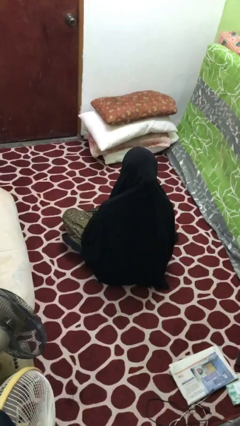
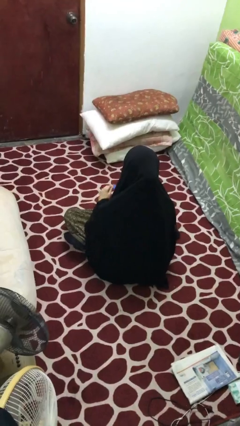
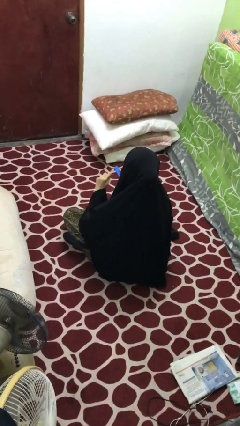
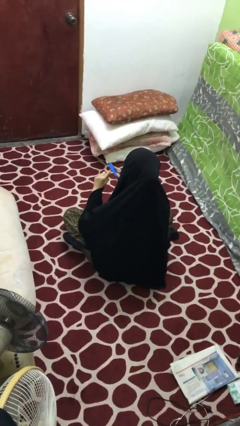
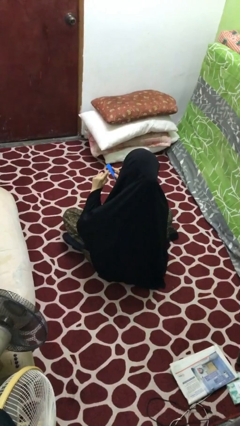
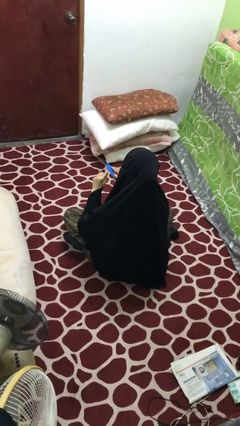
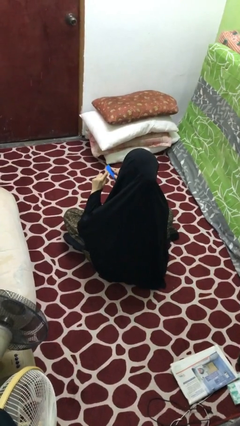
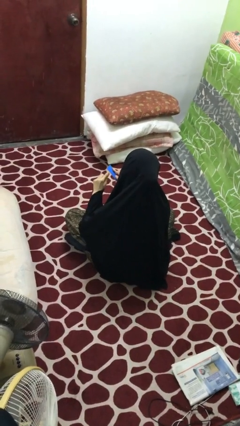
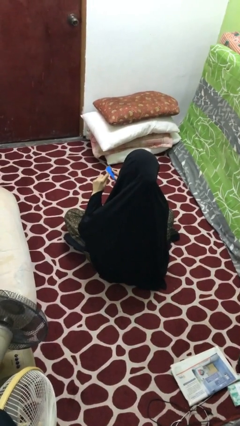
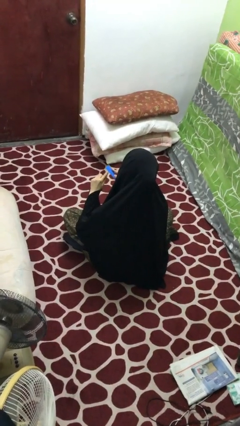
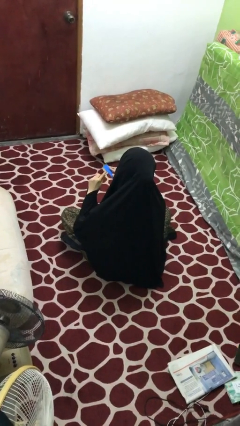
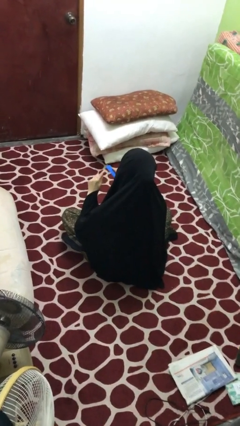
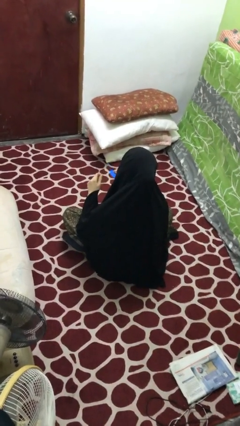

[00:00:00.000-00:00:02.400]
person files fingernails

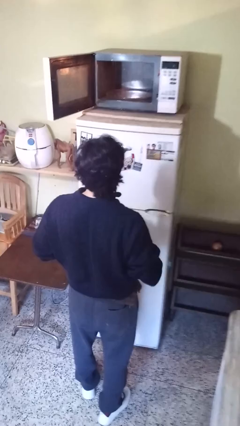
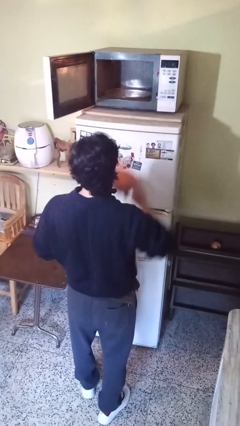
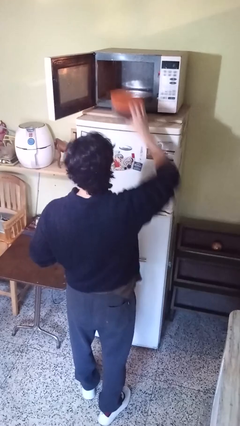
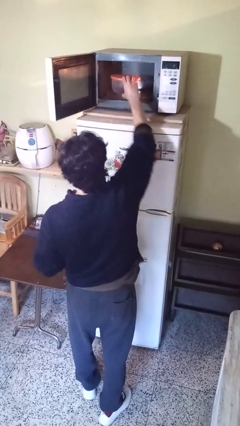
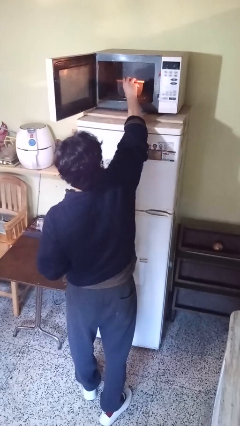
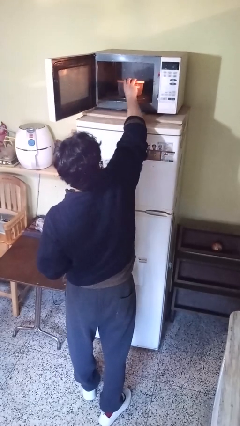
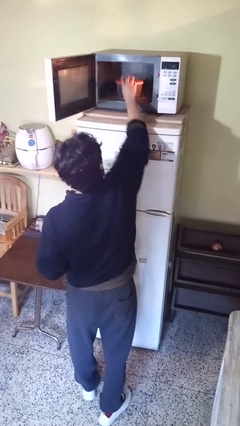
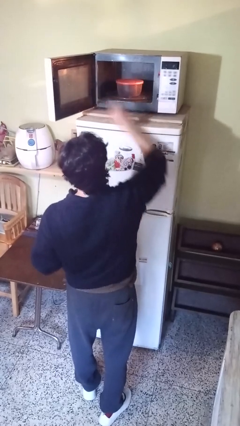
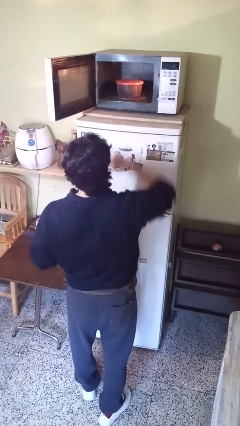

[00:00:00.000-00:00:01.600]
person puts object into microwave

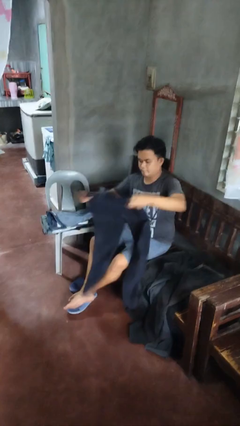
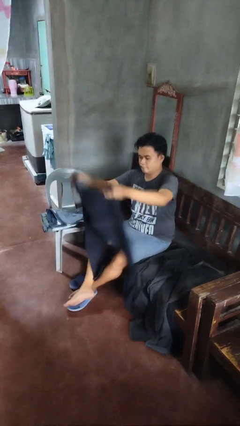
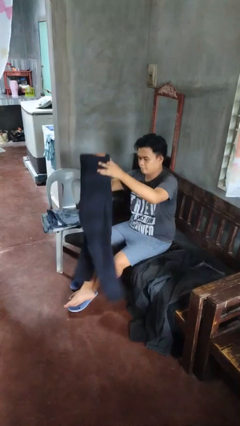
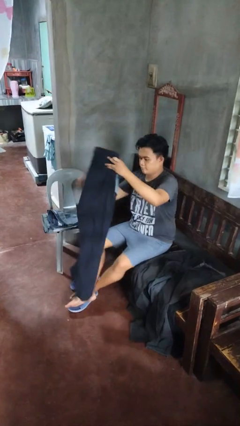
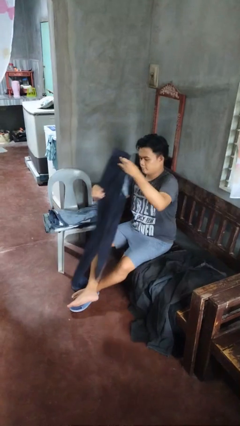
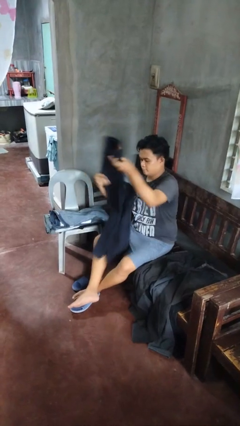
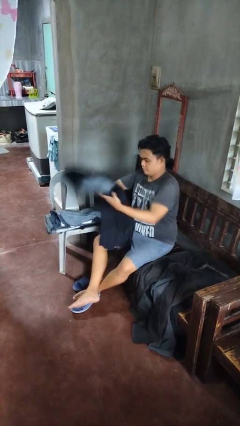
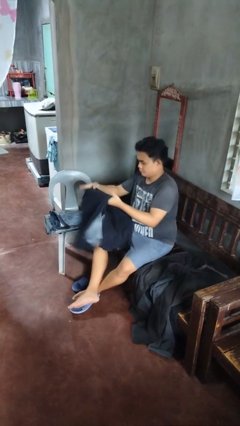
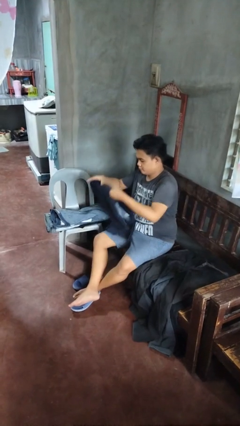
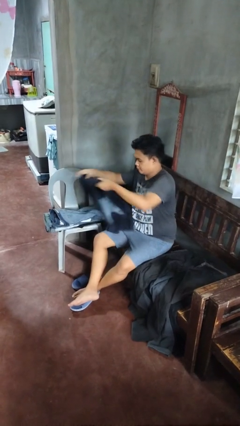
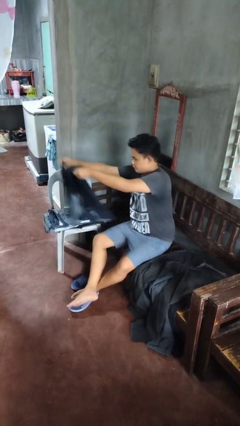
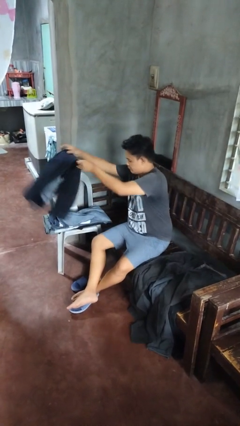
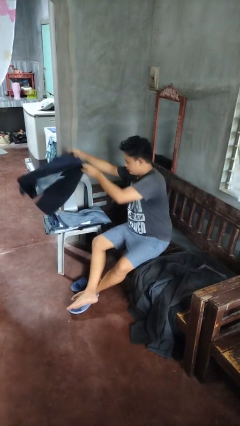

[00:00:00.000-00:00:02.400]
person folds pants

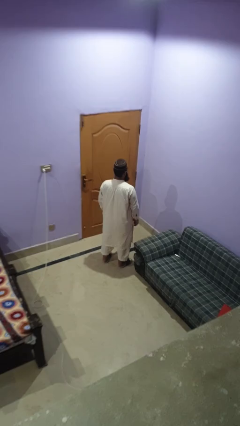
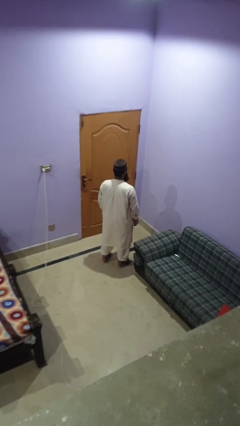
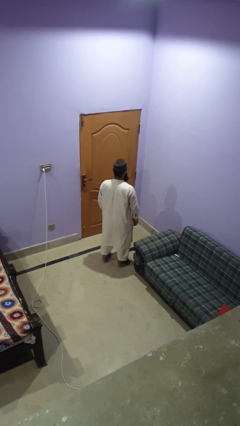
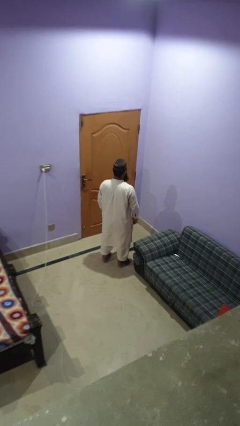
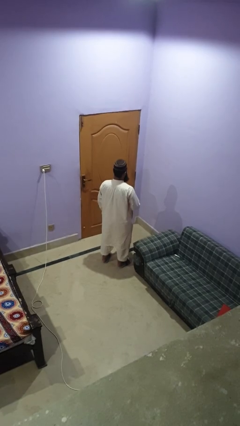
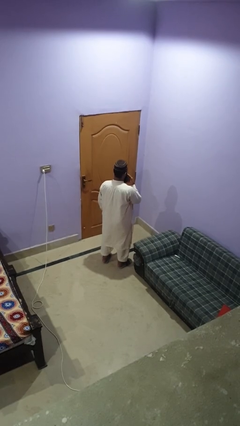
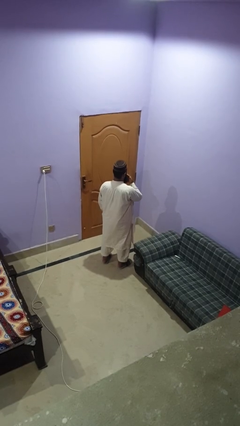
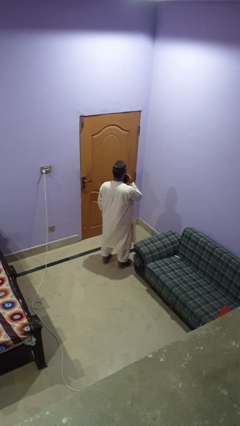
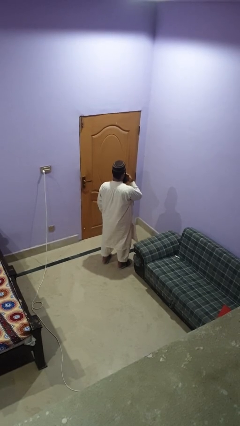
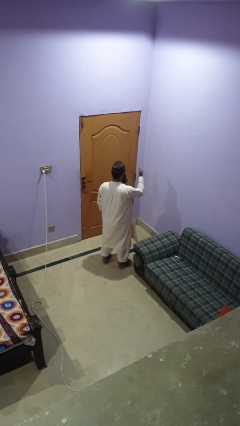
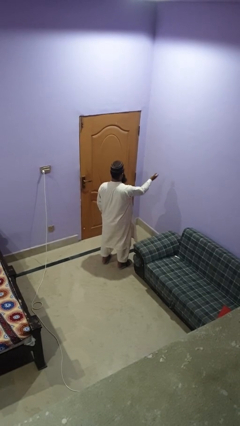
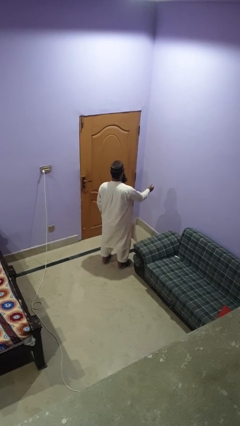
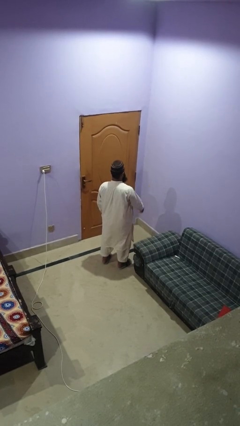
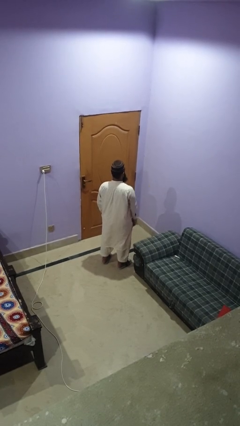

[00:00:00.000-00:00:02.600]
person gestures blow kiss

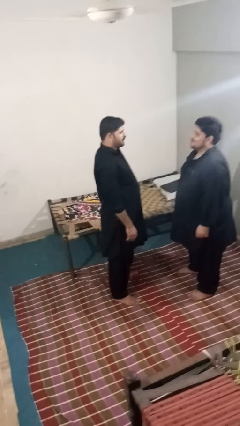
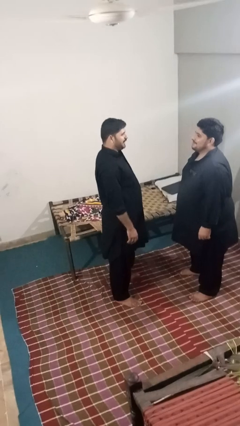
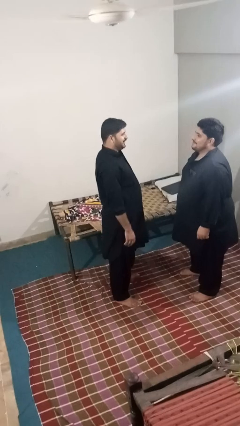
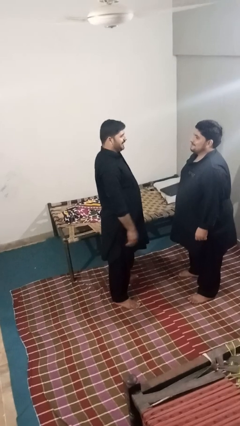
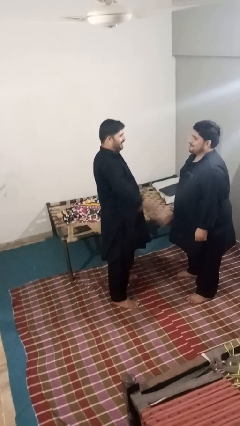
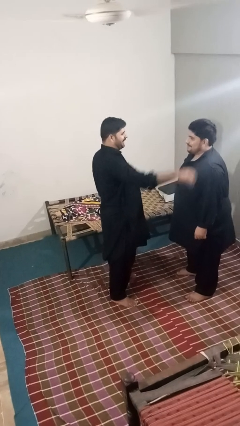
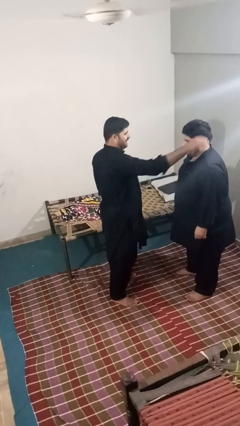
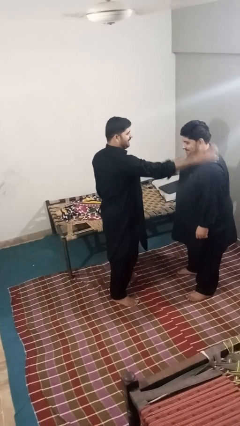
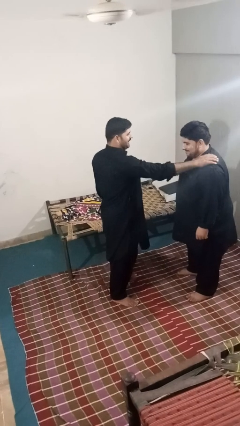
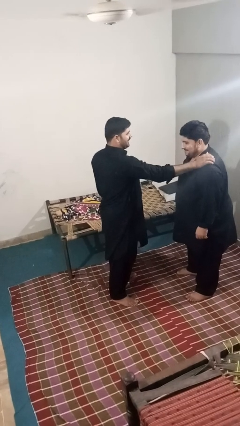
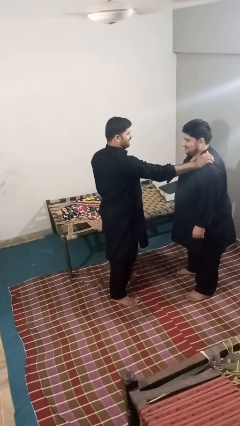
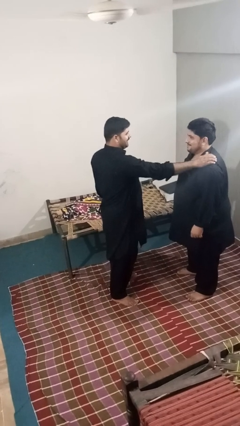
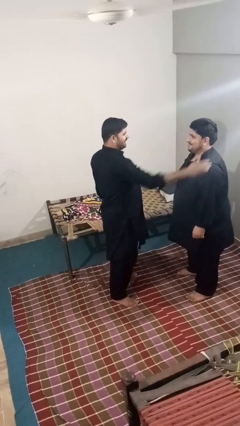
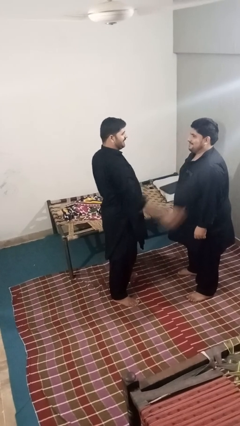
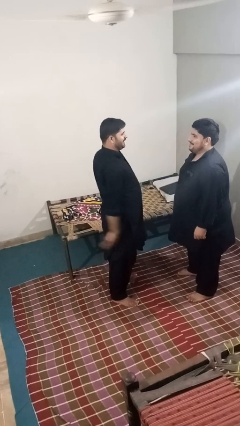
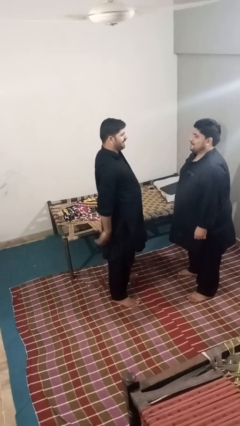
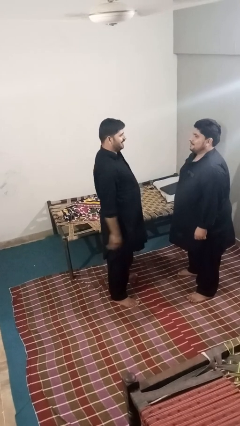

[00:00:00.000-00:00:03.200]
person pounds shoulders of person

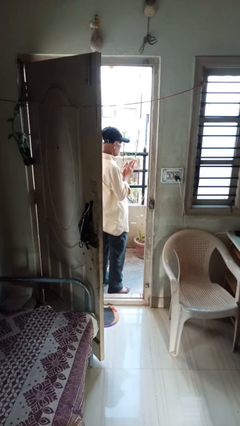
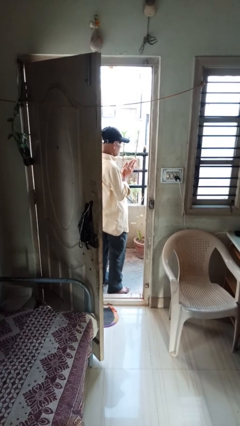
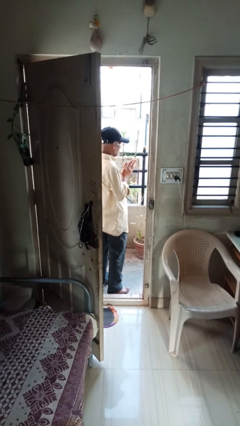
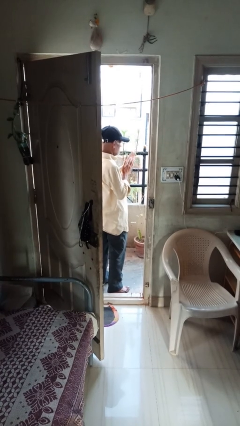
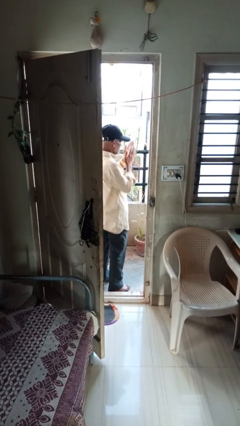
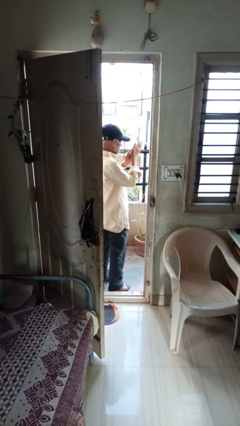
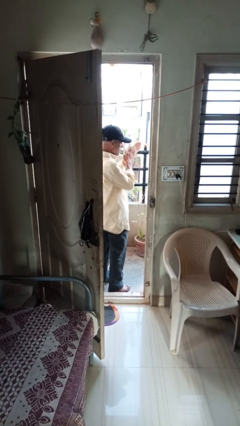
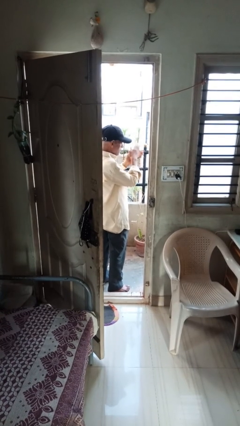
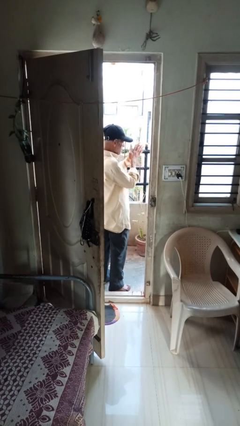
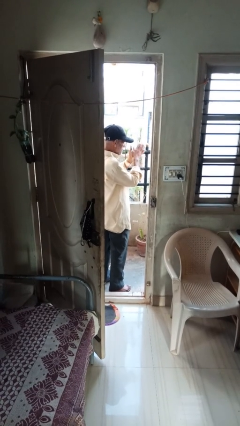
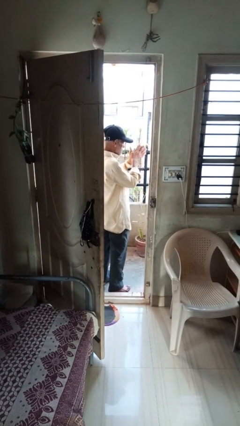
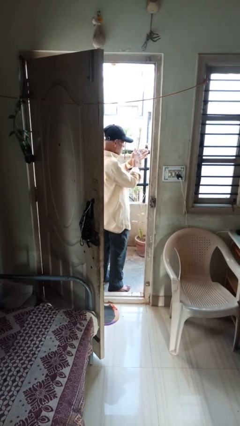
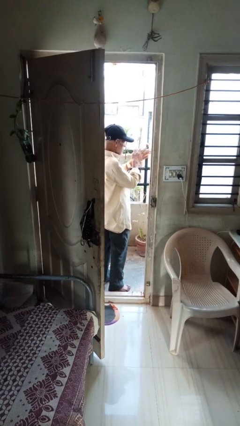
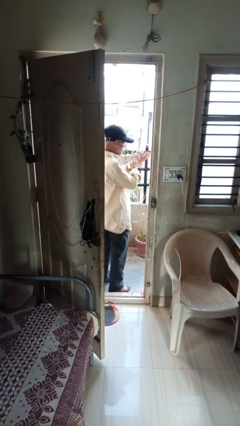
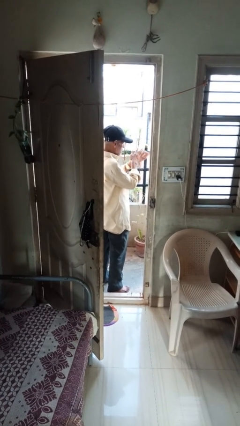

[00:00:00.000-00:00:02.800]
person blows into hands

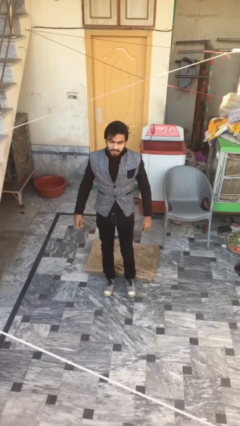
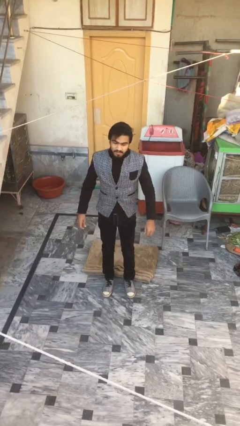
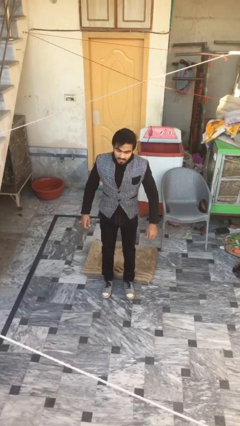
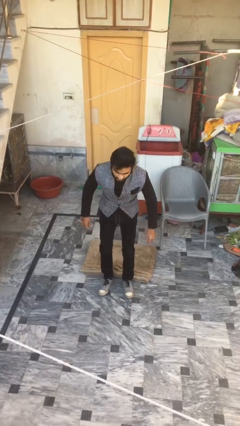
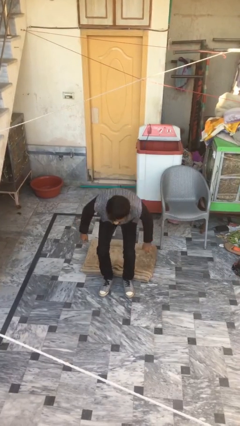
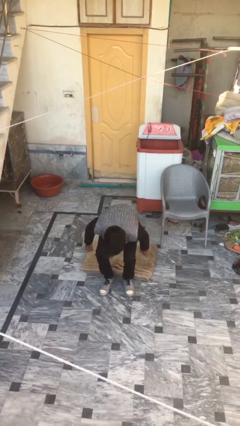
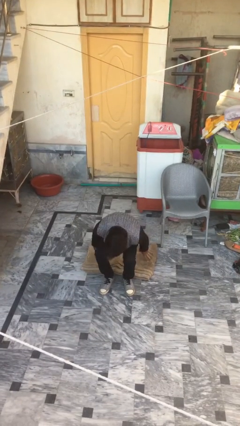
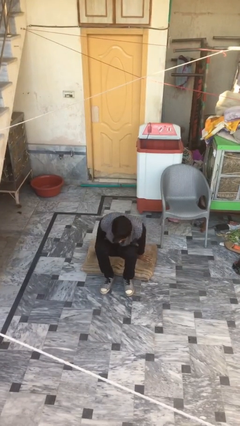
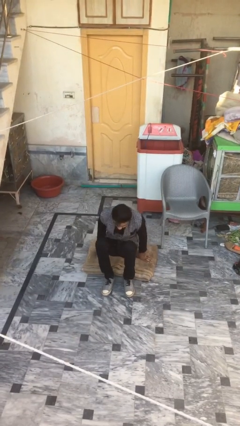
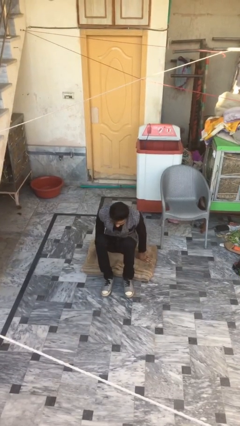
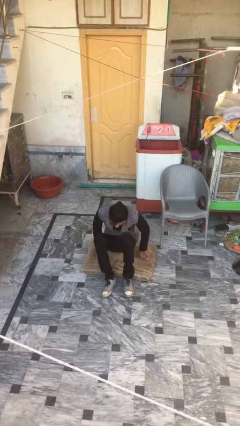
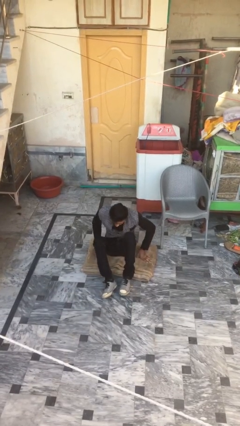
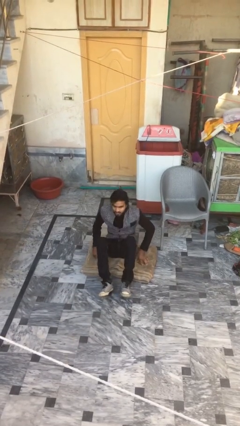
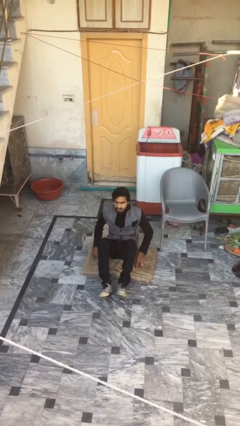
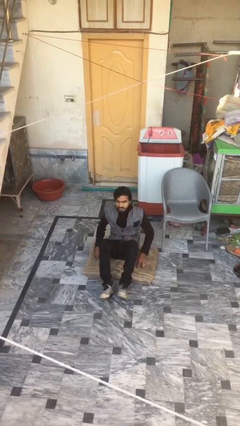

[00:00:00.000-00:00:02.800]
person sits down
